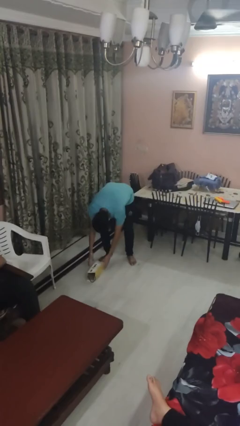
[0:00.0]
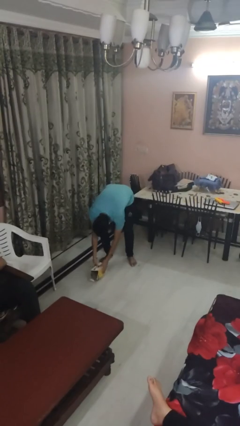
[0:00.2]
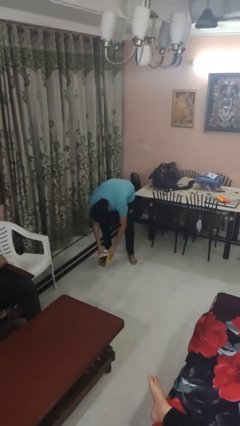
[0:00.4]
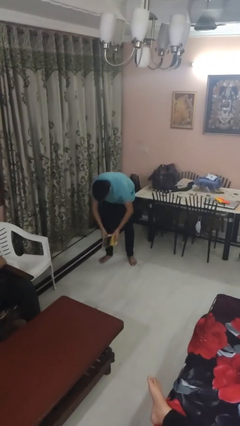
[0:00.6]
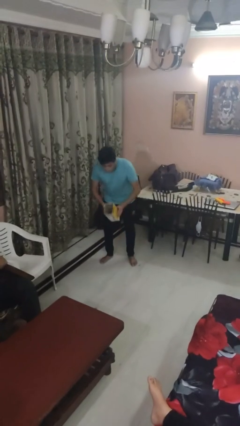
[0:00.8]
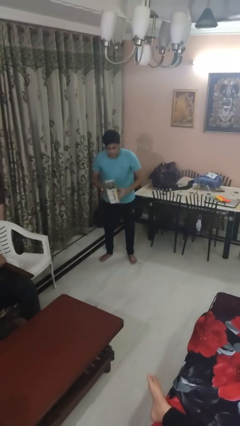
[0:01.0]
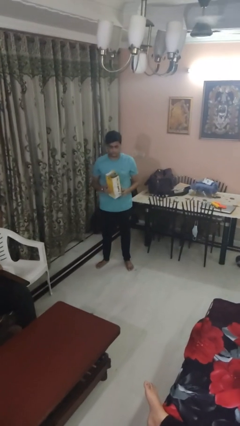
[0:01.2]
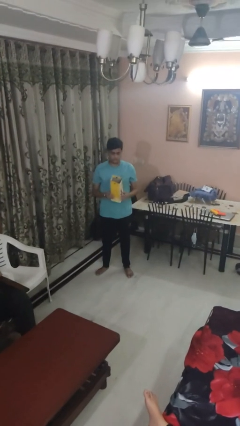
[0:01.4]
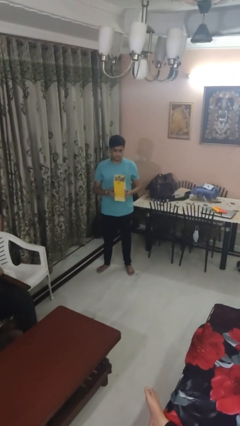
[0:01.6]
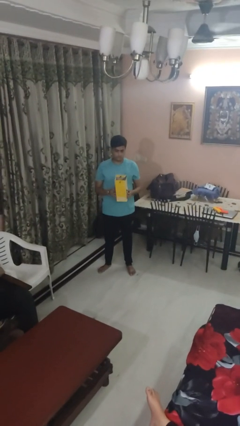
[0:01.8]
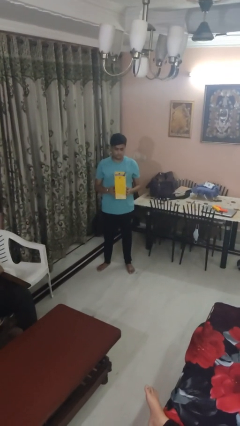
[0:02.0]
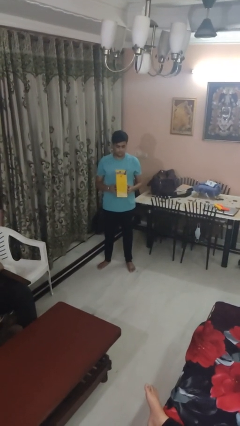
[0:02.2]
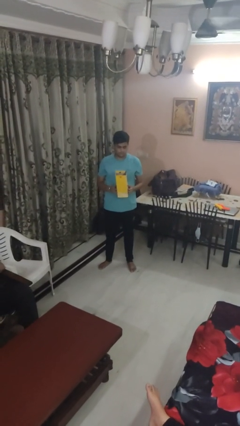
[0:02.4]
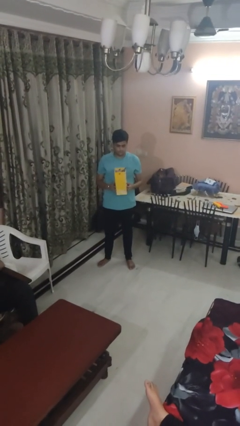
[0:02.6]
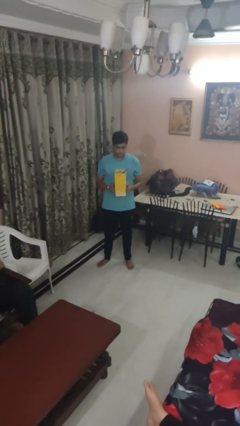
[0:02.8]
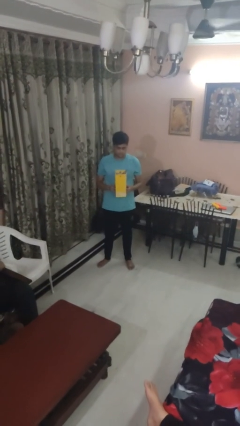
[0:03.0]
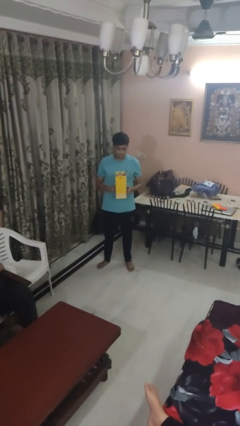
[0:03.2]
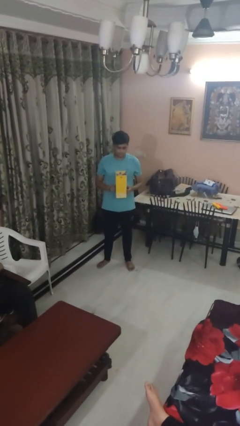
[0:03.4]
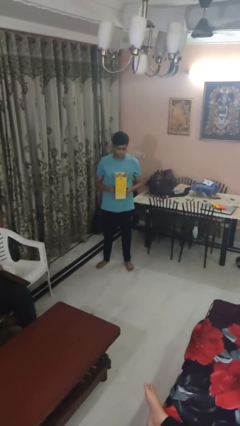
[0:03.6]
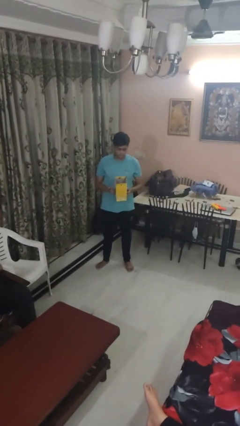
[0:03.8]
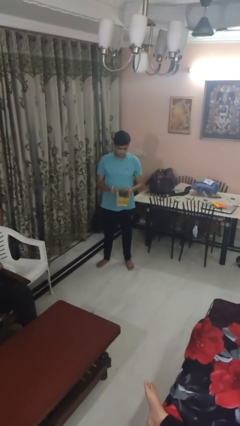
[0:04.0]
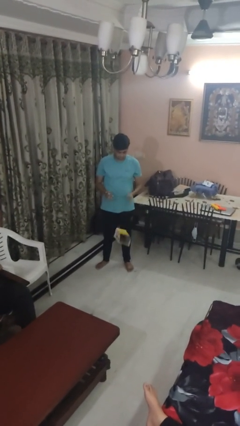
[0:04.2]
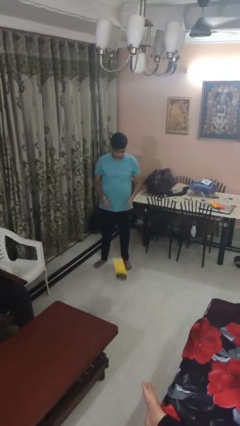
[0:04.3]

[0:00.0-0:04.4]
person picks up object from floor

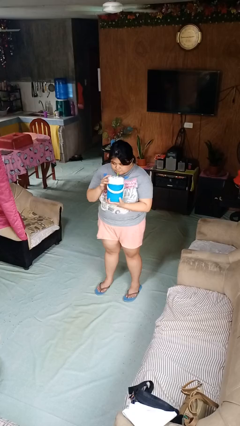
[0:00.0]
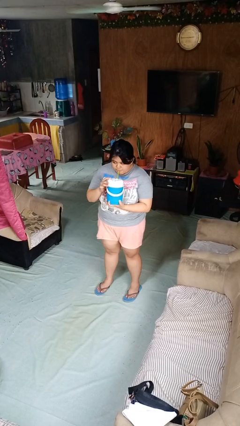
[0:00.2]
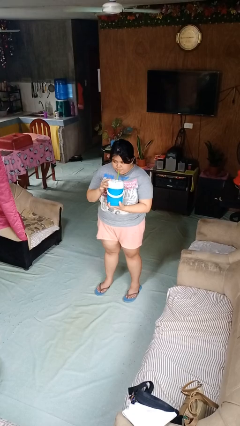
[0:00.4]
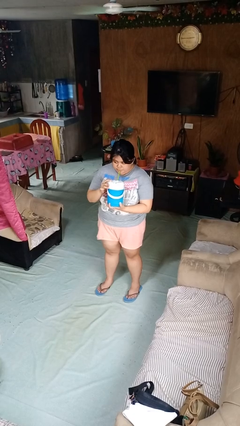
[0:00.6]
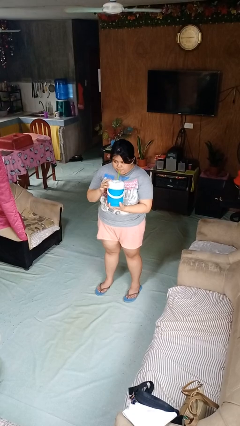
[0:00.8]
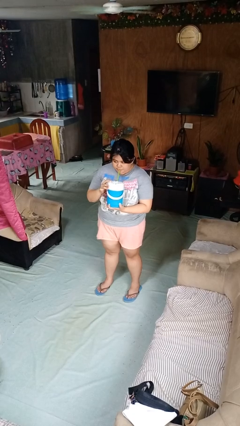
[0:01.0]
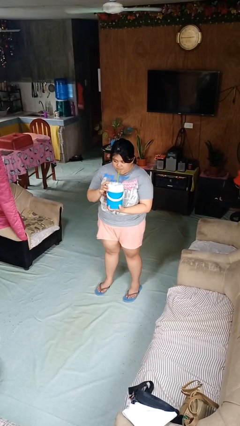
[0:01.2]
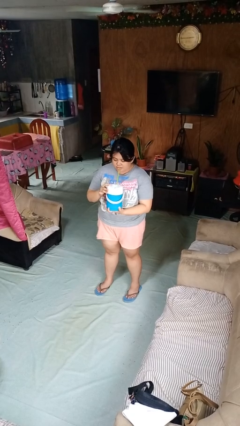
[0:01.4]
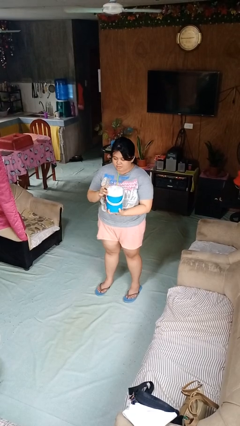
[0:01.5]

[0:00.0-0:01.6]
person drinks from straw

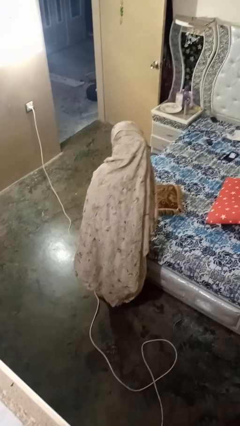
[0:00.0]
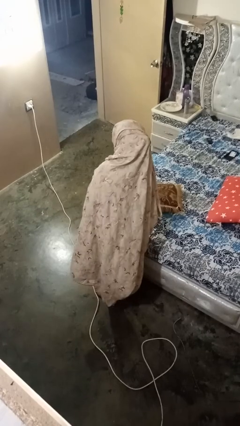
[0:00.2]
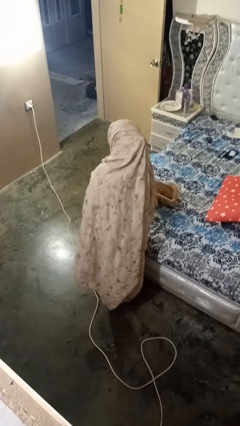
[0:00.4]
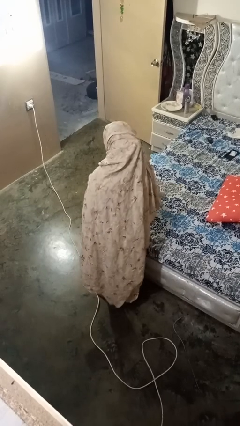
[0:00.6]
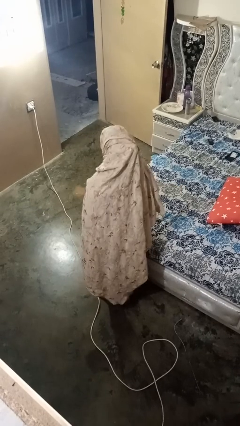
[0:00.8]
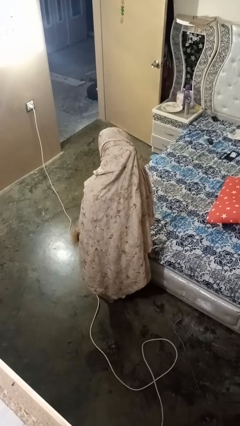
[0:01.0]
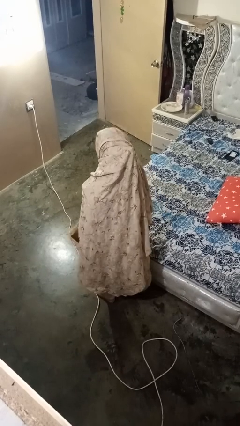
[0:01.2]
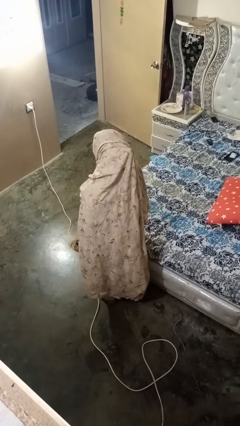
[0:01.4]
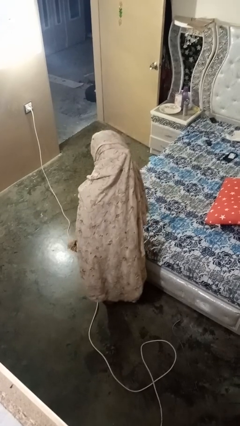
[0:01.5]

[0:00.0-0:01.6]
person picks up object from bed

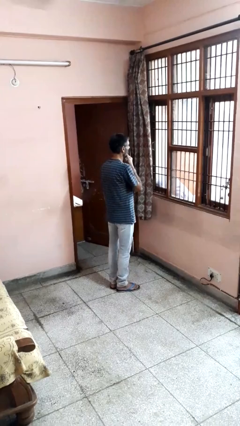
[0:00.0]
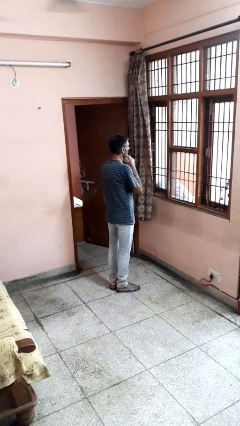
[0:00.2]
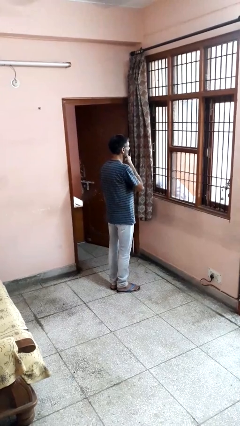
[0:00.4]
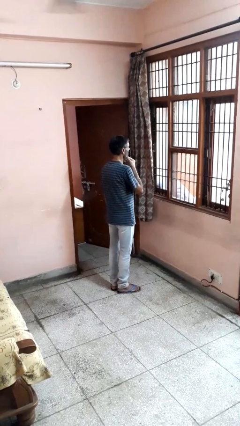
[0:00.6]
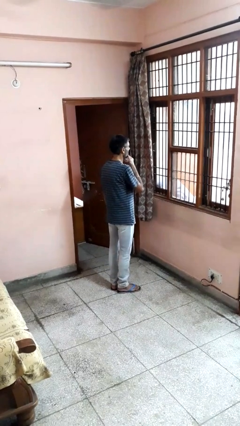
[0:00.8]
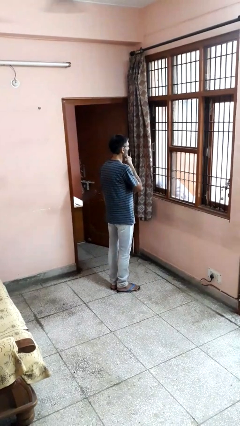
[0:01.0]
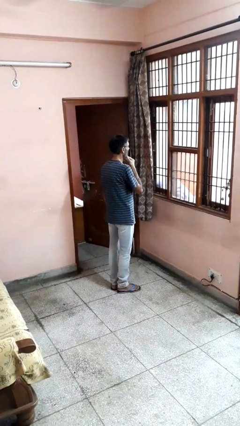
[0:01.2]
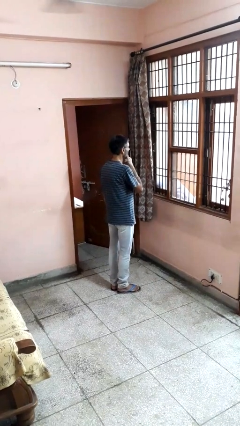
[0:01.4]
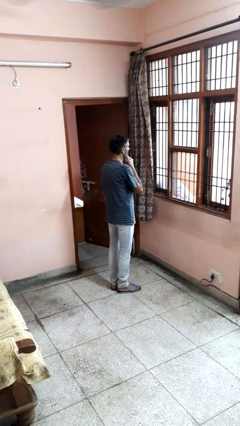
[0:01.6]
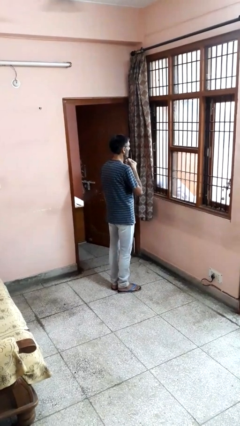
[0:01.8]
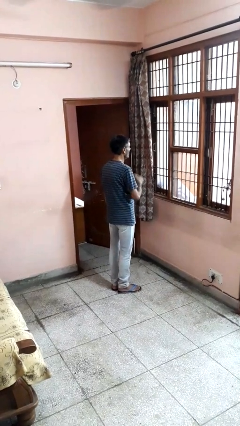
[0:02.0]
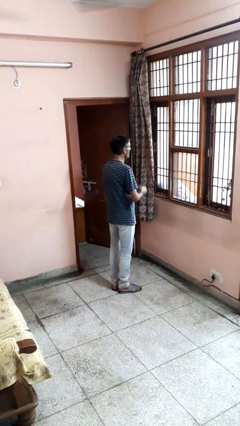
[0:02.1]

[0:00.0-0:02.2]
person strokes chin

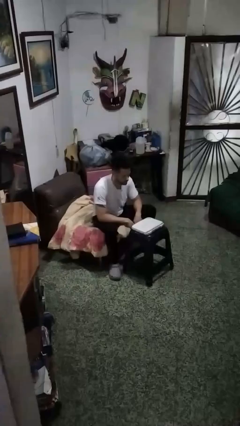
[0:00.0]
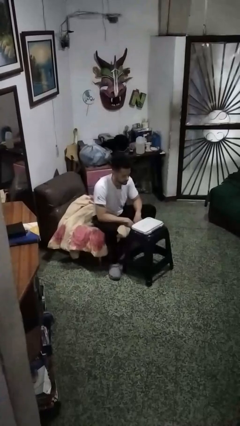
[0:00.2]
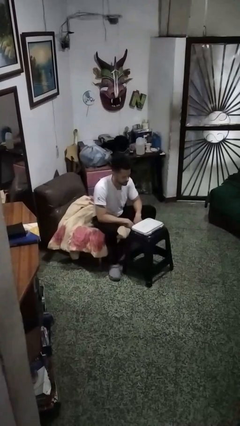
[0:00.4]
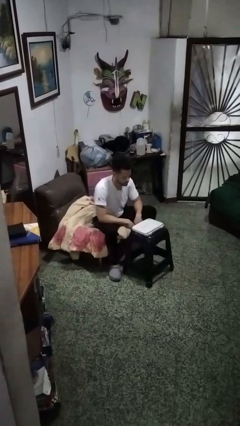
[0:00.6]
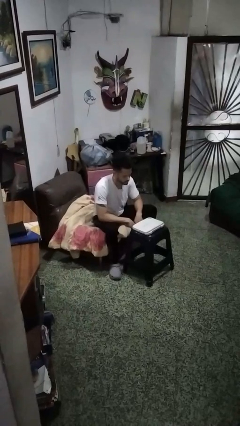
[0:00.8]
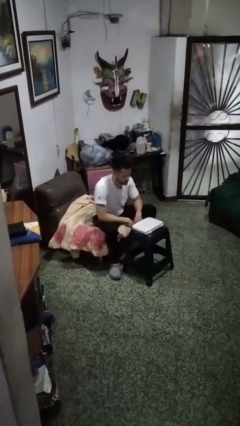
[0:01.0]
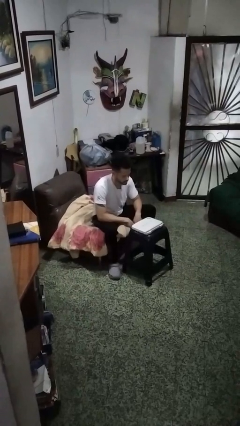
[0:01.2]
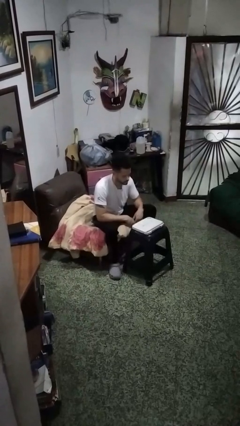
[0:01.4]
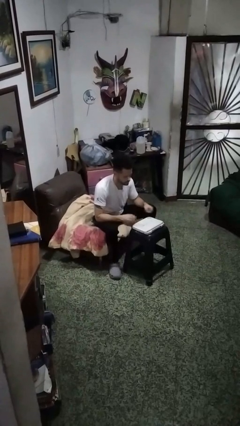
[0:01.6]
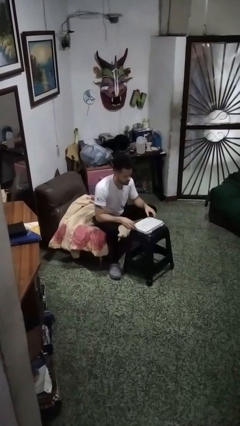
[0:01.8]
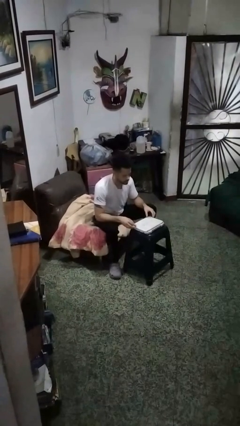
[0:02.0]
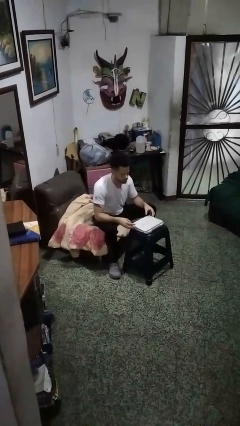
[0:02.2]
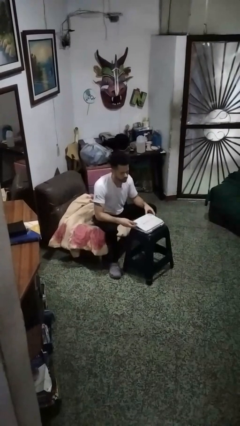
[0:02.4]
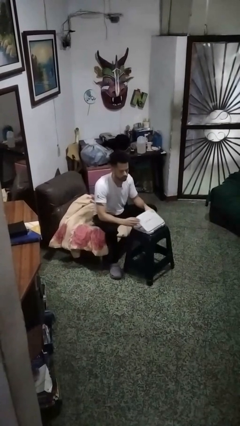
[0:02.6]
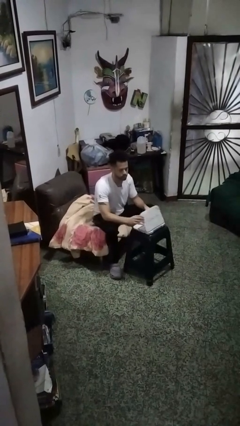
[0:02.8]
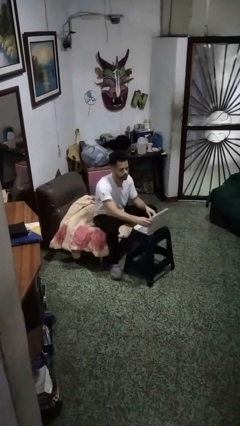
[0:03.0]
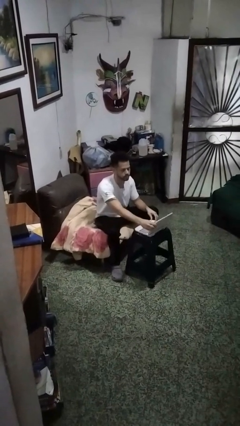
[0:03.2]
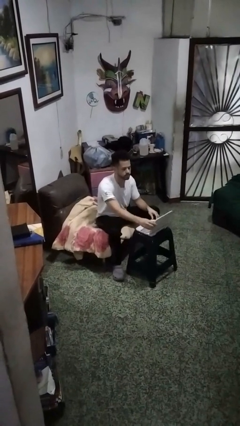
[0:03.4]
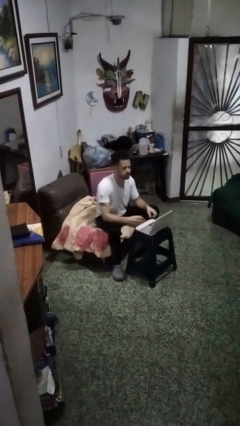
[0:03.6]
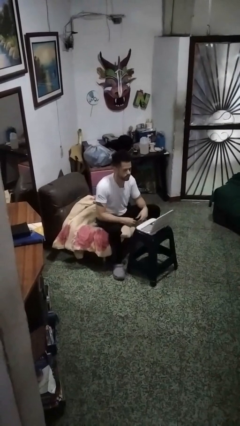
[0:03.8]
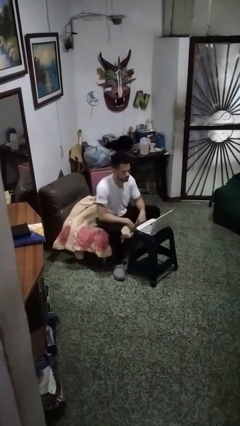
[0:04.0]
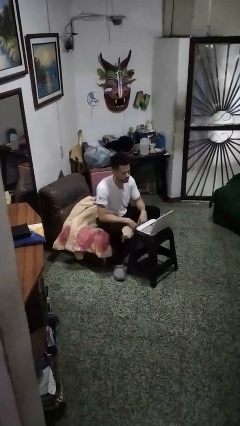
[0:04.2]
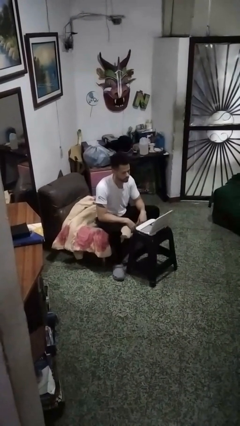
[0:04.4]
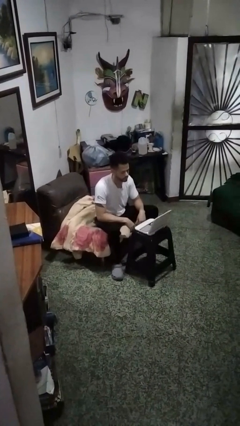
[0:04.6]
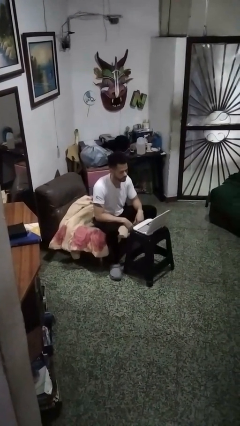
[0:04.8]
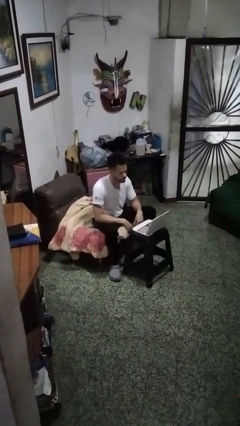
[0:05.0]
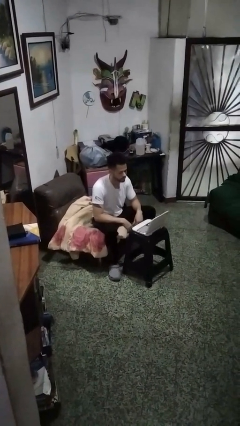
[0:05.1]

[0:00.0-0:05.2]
person opens laptop

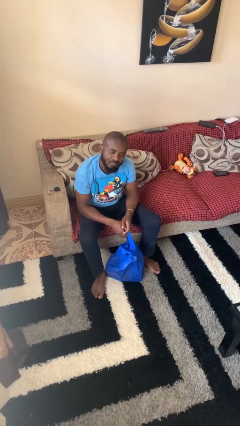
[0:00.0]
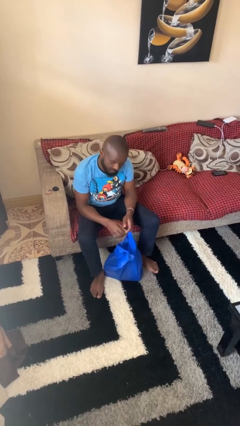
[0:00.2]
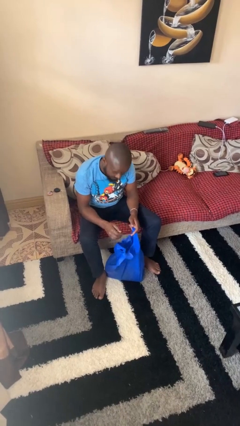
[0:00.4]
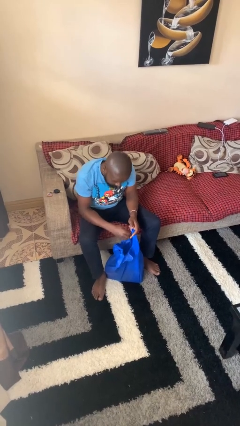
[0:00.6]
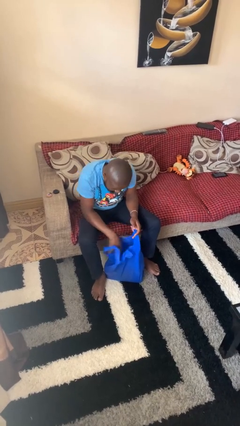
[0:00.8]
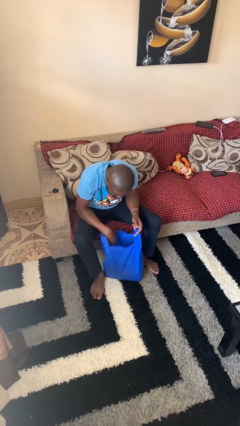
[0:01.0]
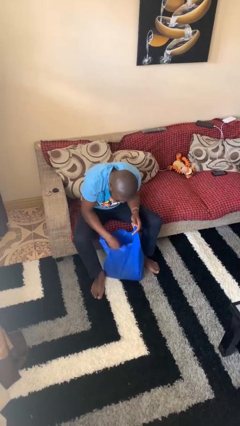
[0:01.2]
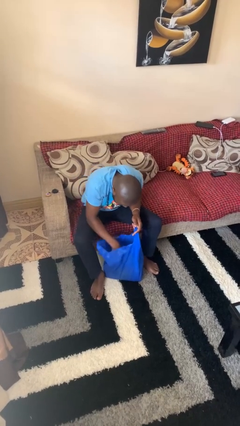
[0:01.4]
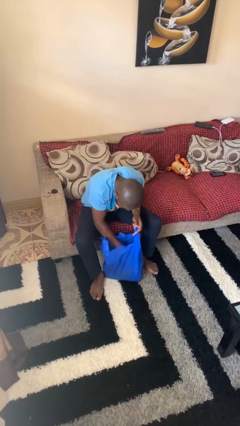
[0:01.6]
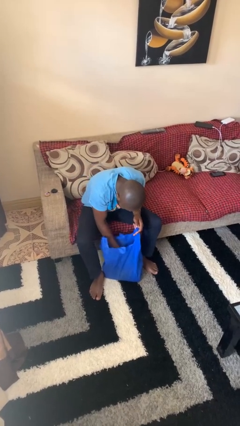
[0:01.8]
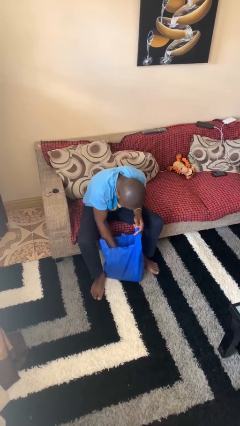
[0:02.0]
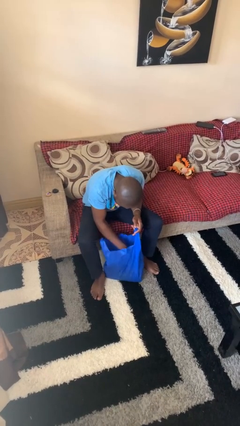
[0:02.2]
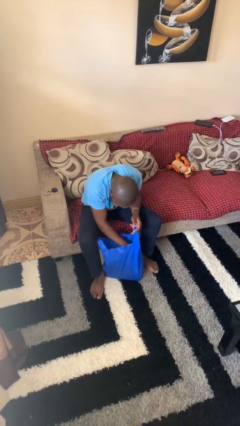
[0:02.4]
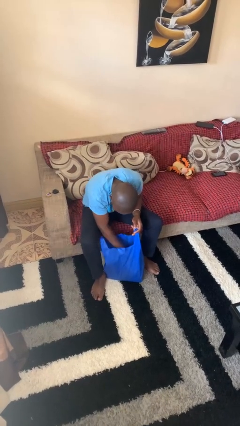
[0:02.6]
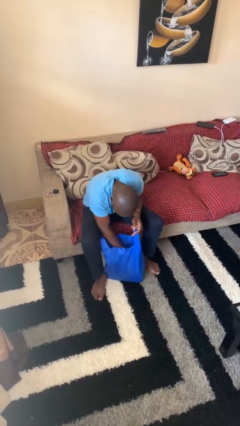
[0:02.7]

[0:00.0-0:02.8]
person searches in bag
